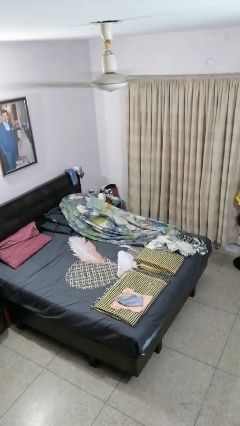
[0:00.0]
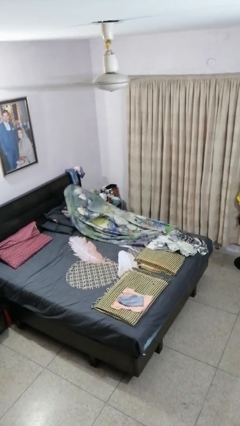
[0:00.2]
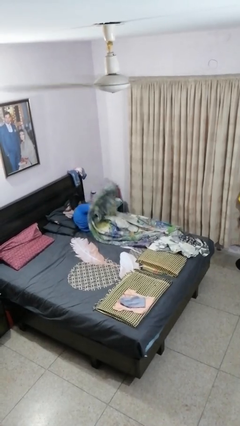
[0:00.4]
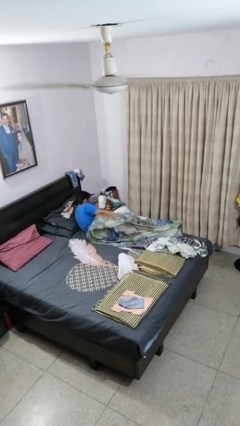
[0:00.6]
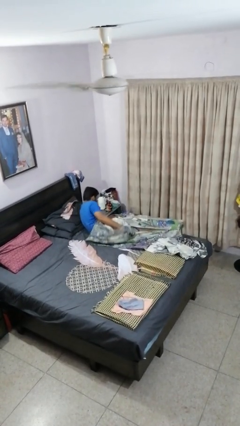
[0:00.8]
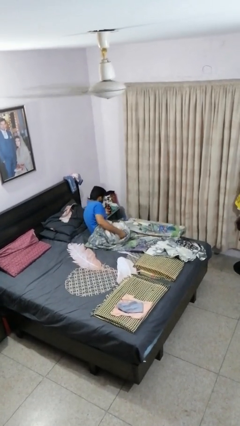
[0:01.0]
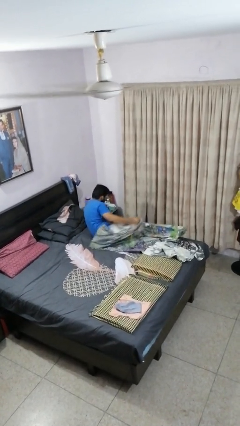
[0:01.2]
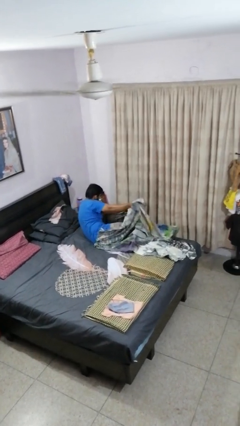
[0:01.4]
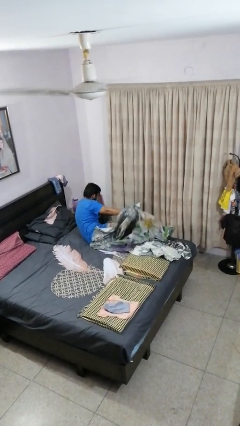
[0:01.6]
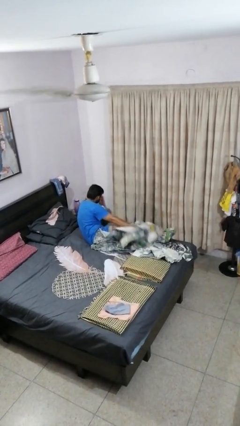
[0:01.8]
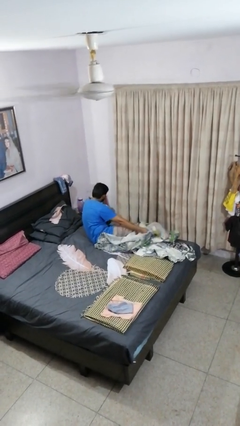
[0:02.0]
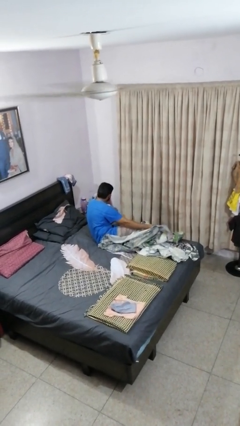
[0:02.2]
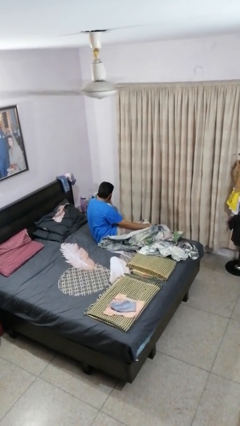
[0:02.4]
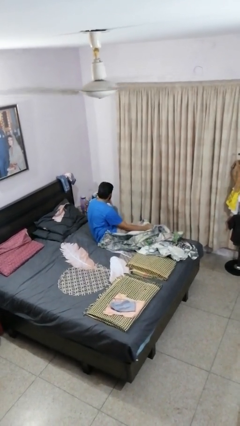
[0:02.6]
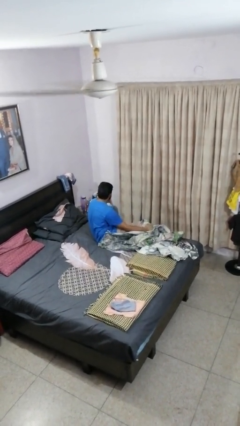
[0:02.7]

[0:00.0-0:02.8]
person uncovers with bedsheets

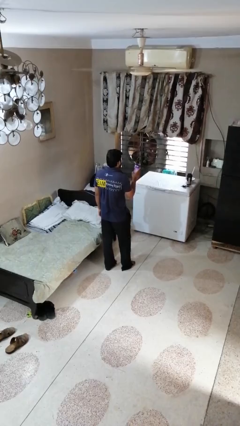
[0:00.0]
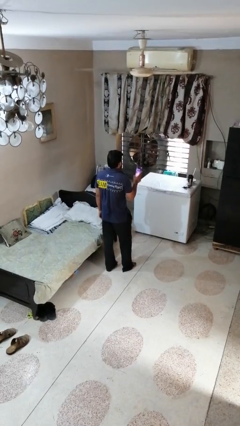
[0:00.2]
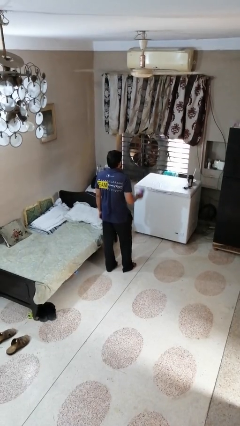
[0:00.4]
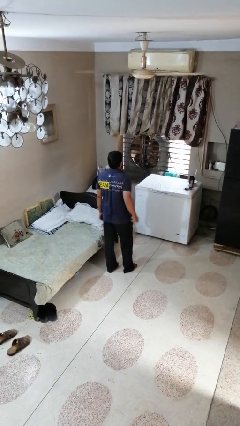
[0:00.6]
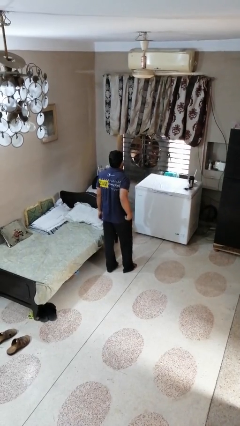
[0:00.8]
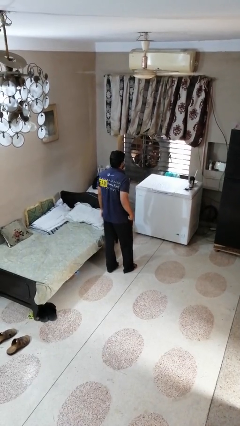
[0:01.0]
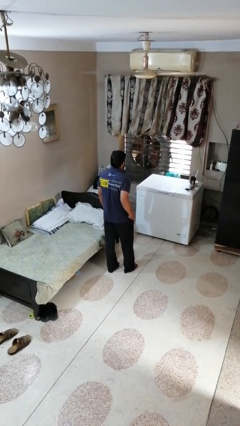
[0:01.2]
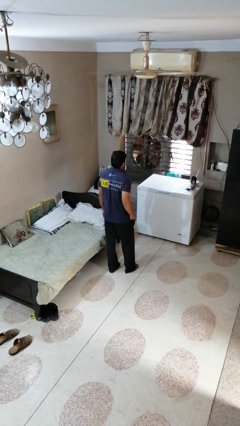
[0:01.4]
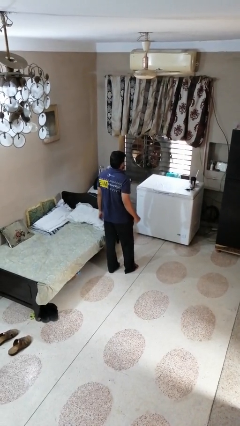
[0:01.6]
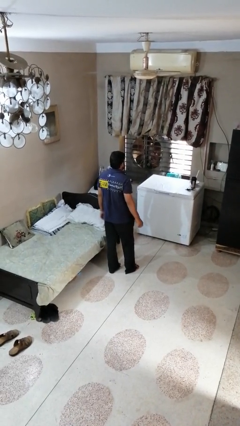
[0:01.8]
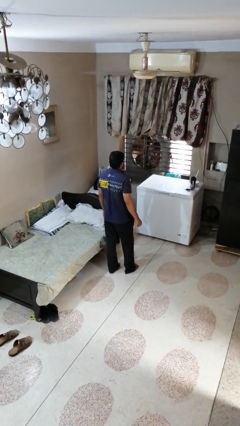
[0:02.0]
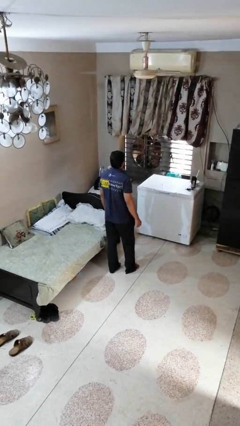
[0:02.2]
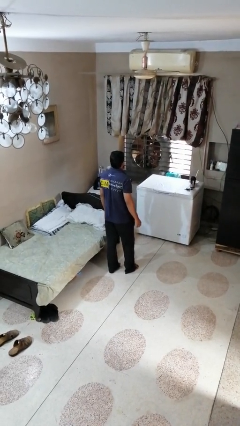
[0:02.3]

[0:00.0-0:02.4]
person puts phone into pocket

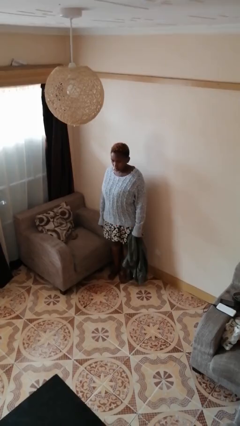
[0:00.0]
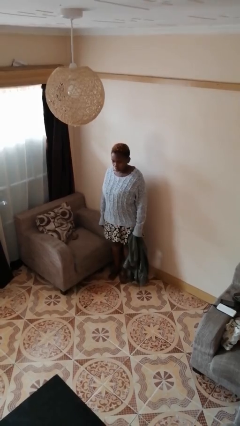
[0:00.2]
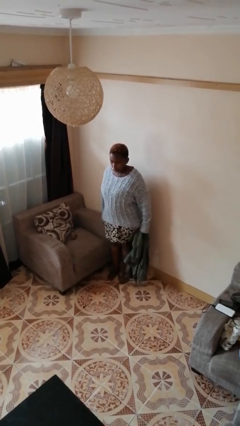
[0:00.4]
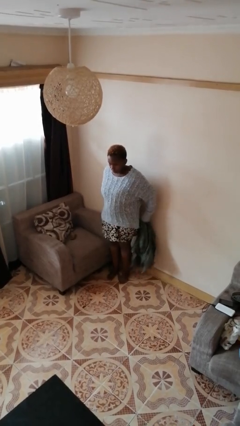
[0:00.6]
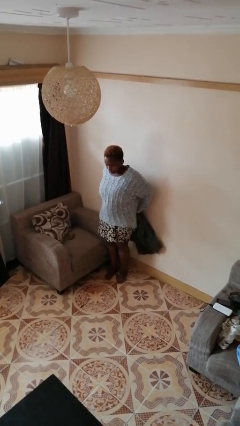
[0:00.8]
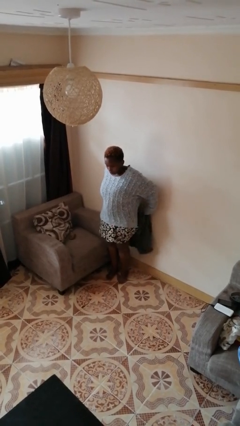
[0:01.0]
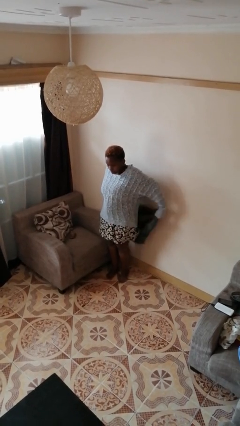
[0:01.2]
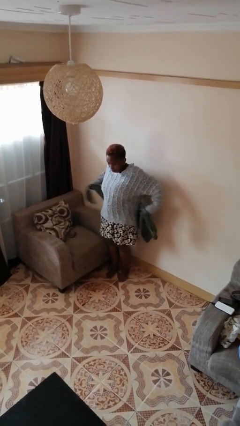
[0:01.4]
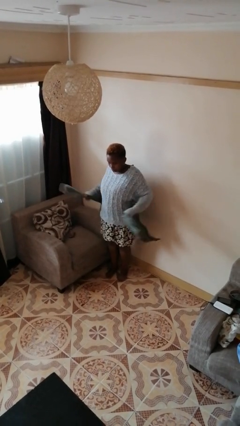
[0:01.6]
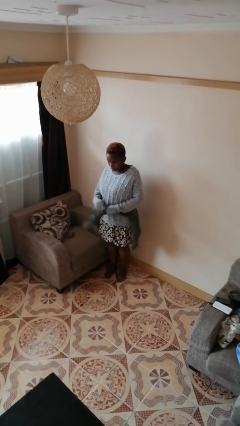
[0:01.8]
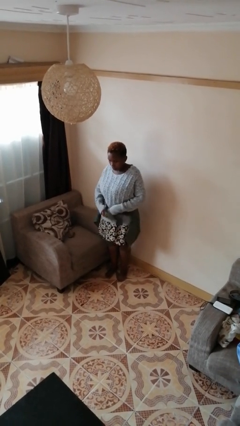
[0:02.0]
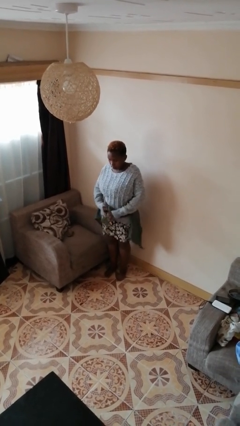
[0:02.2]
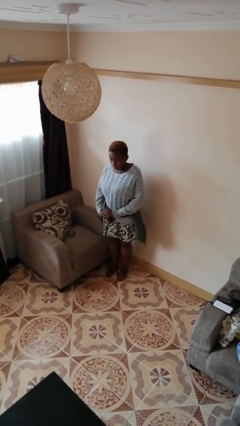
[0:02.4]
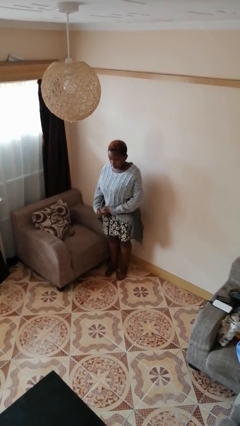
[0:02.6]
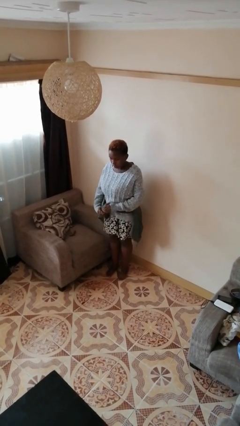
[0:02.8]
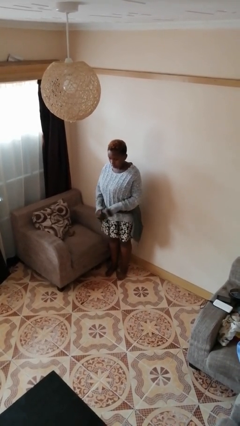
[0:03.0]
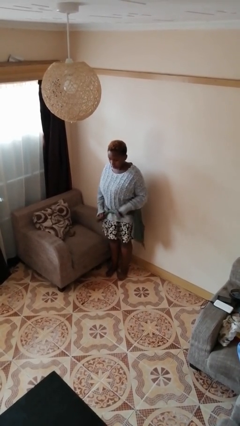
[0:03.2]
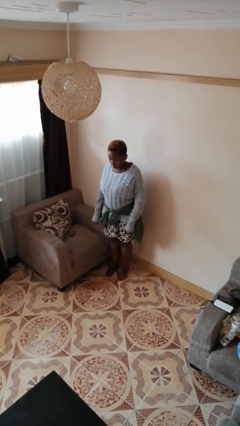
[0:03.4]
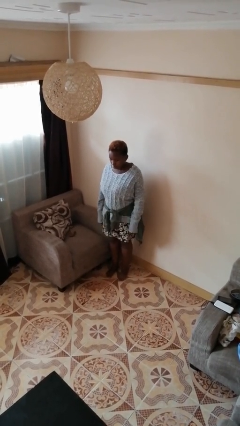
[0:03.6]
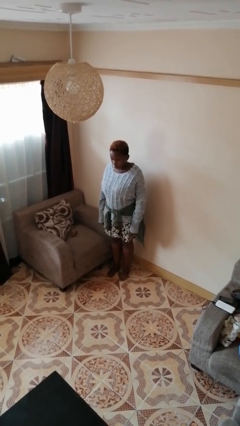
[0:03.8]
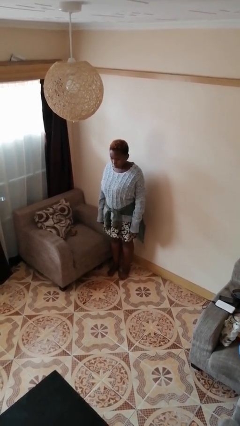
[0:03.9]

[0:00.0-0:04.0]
person ties jacket around waist

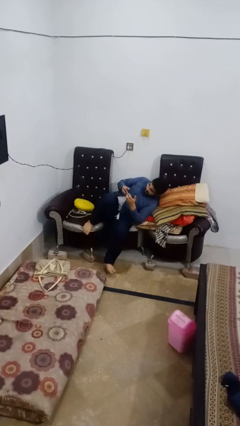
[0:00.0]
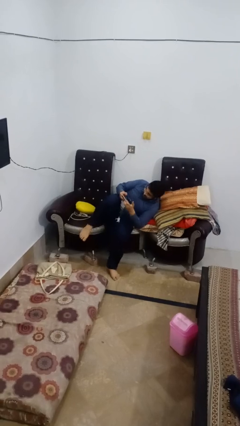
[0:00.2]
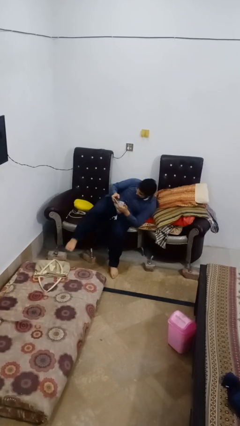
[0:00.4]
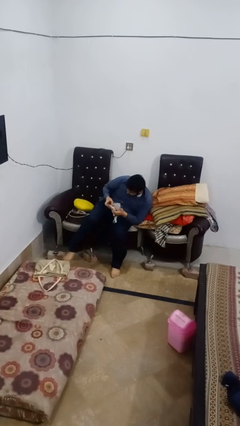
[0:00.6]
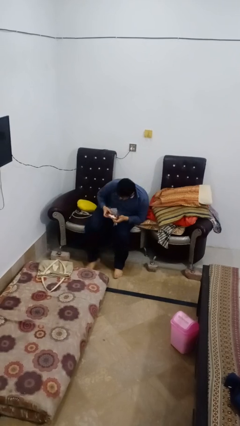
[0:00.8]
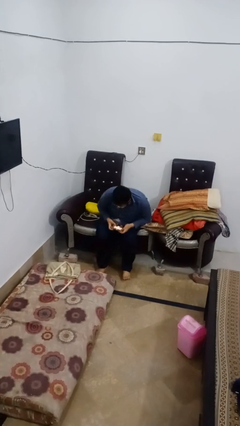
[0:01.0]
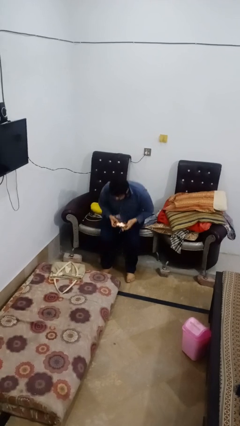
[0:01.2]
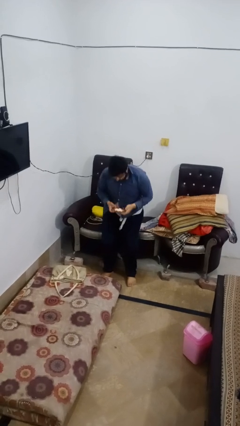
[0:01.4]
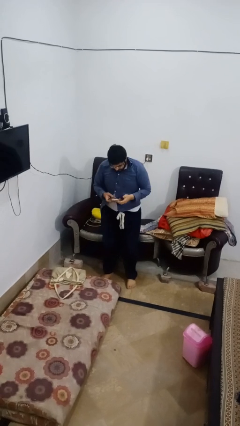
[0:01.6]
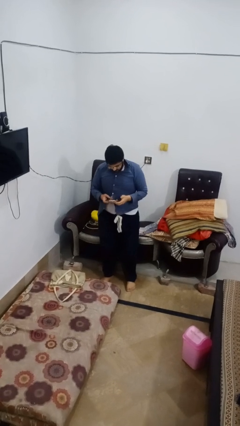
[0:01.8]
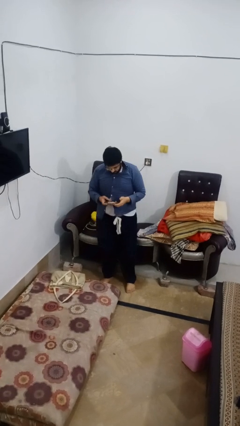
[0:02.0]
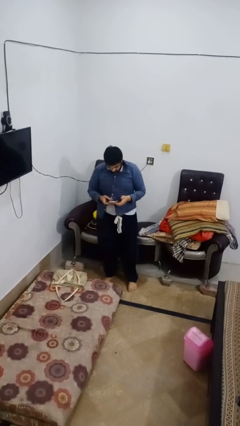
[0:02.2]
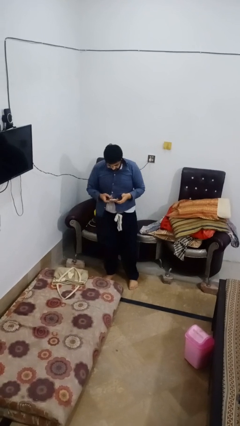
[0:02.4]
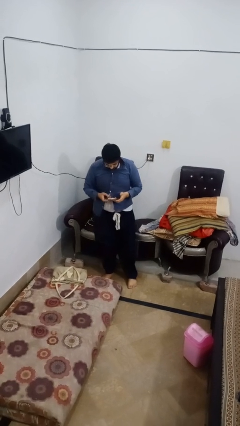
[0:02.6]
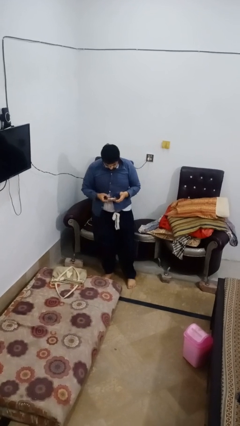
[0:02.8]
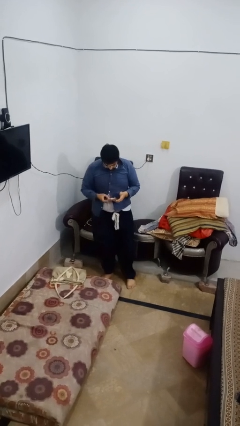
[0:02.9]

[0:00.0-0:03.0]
person stands up

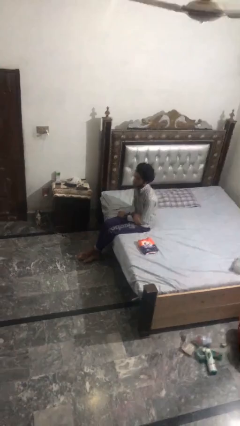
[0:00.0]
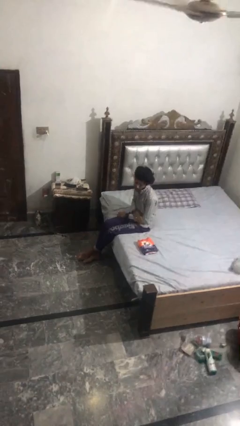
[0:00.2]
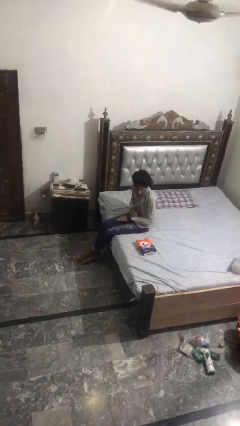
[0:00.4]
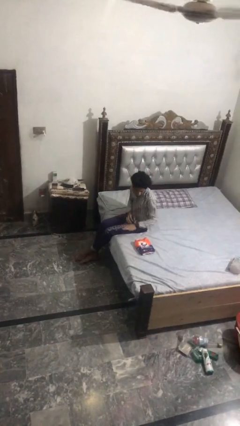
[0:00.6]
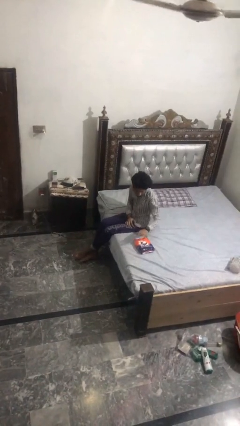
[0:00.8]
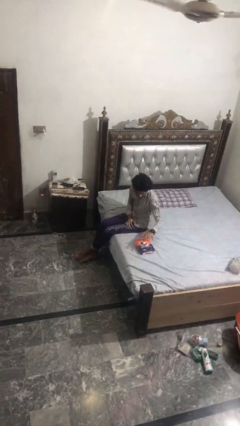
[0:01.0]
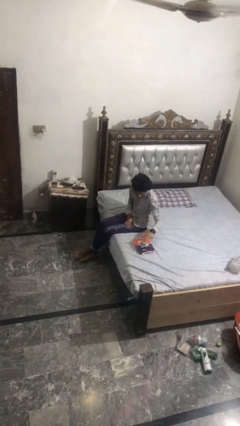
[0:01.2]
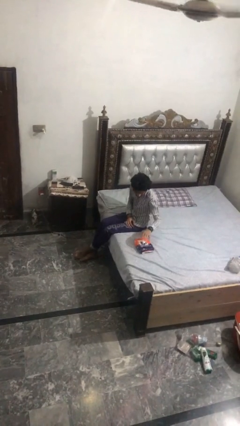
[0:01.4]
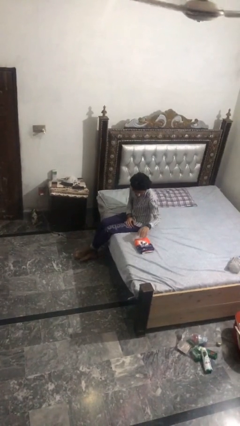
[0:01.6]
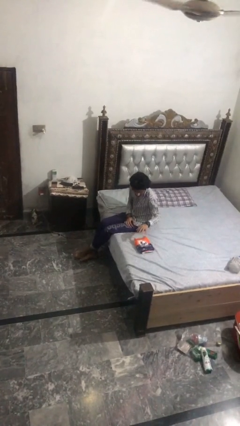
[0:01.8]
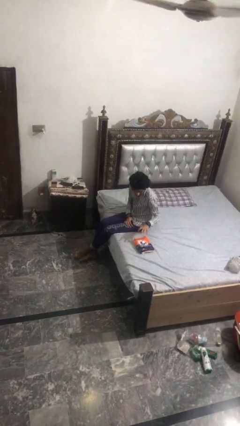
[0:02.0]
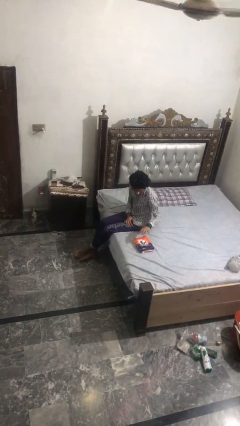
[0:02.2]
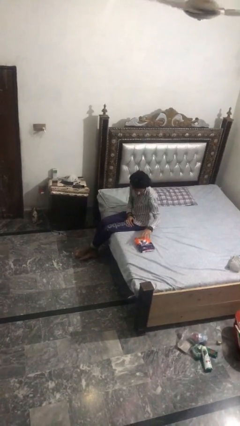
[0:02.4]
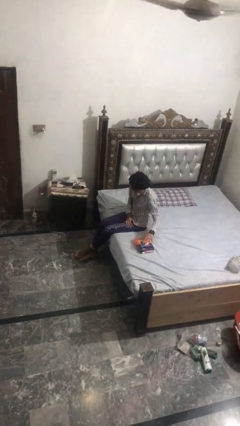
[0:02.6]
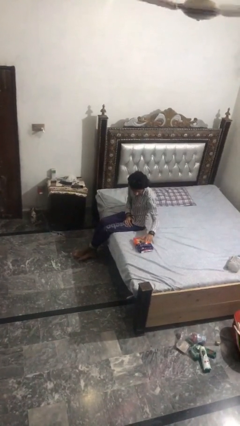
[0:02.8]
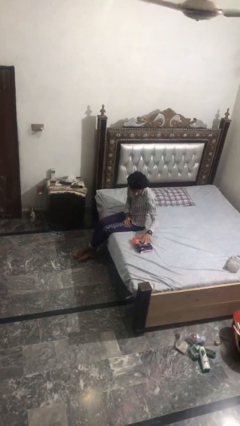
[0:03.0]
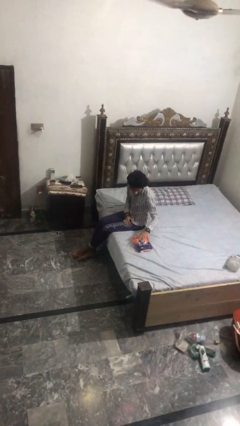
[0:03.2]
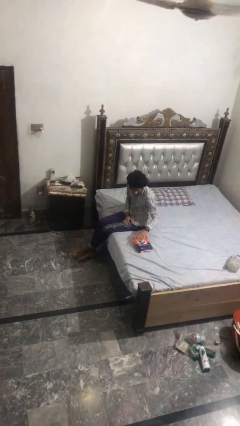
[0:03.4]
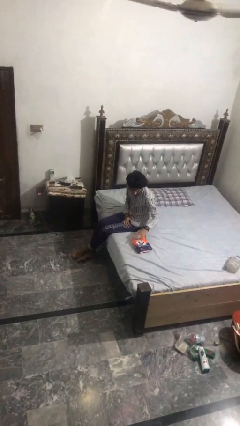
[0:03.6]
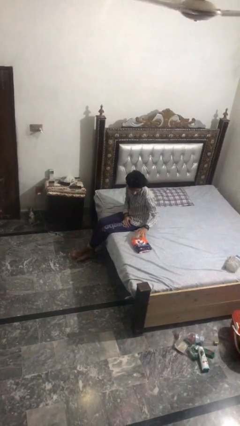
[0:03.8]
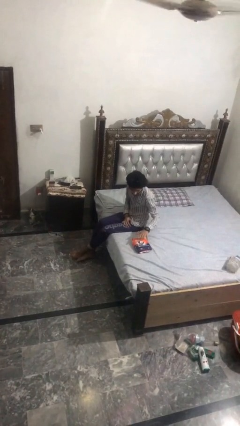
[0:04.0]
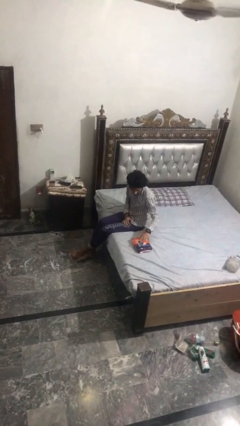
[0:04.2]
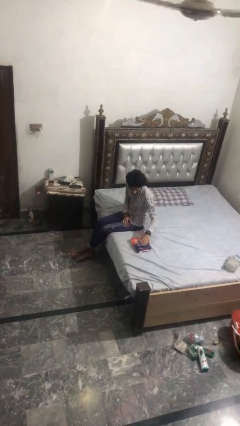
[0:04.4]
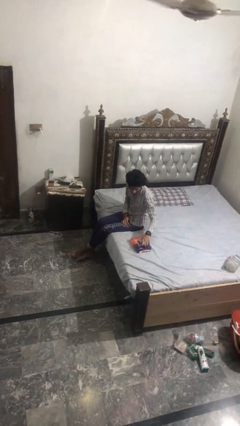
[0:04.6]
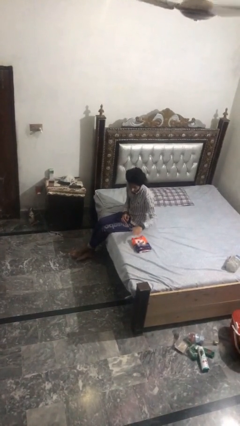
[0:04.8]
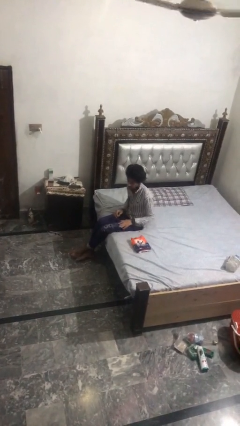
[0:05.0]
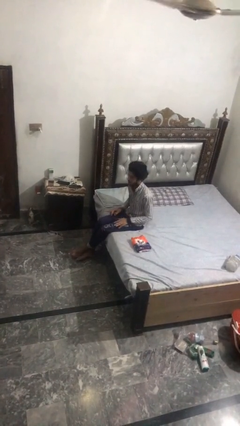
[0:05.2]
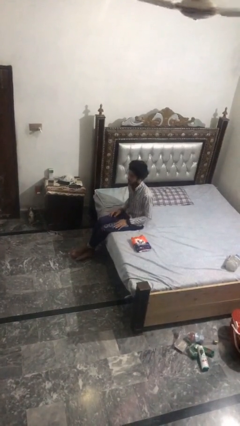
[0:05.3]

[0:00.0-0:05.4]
person waves hand over object
